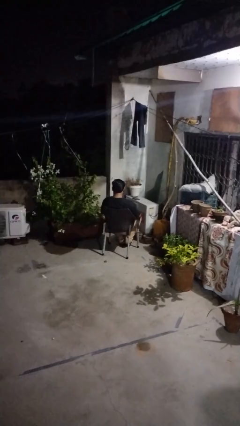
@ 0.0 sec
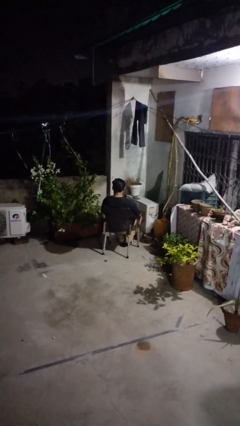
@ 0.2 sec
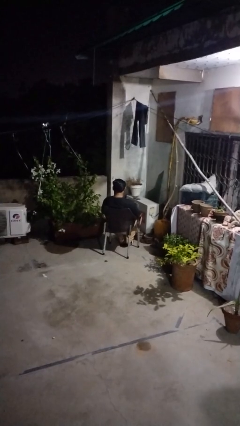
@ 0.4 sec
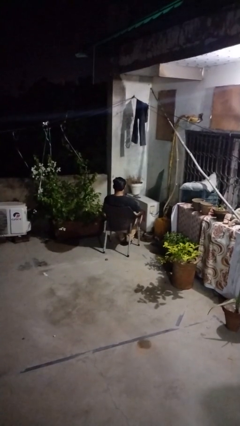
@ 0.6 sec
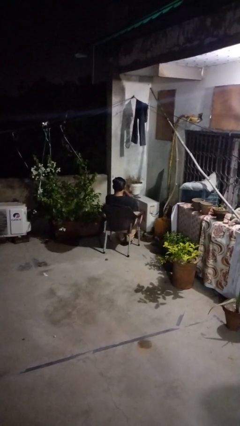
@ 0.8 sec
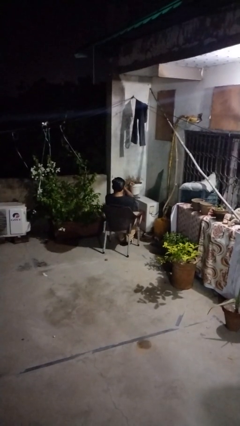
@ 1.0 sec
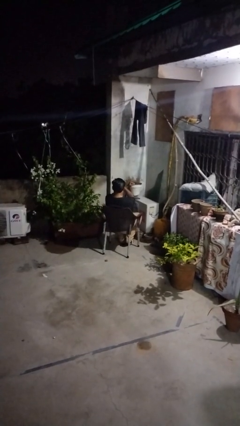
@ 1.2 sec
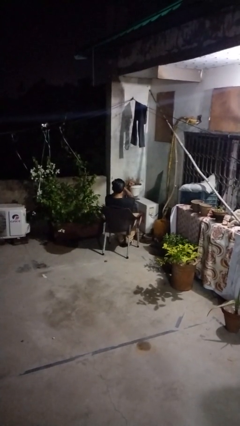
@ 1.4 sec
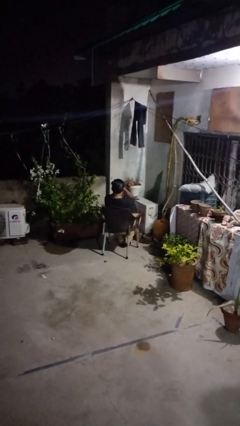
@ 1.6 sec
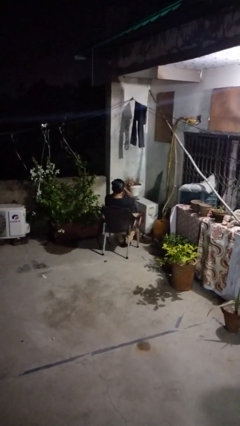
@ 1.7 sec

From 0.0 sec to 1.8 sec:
person gestures arms x

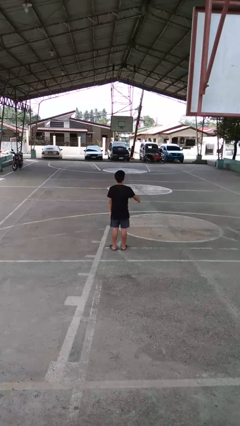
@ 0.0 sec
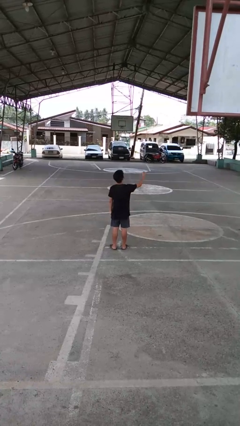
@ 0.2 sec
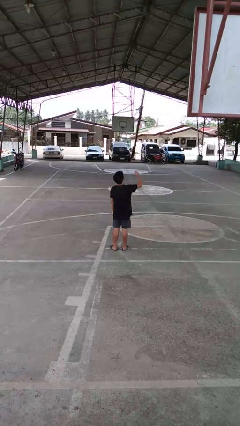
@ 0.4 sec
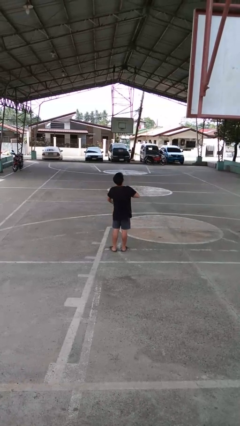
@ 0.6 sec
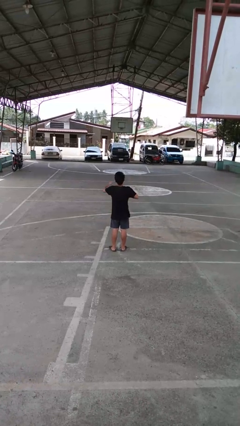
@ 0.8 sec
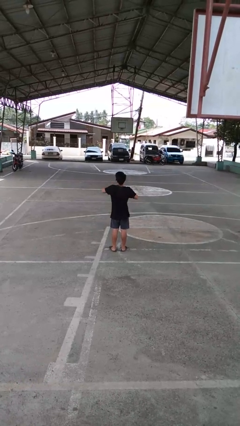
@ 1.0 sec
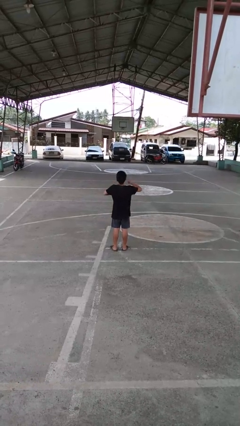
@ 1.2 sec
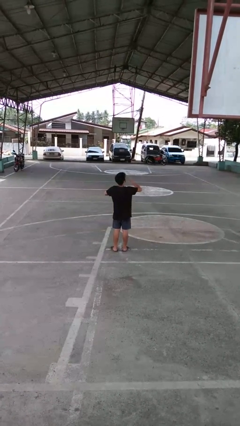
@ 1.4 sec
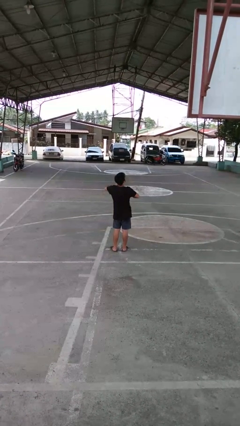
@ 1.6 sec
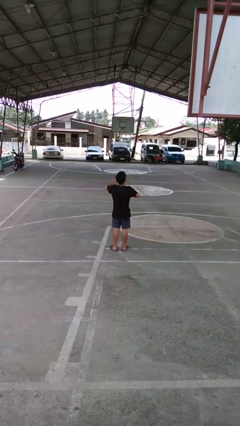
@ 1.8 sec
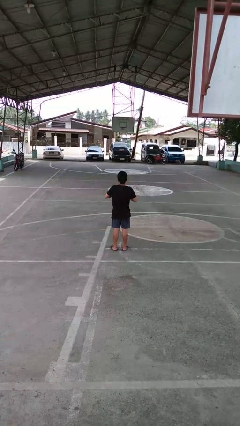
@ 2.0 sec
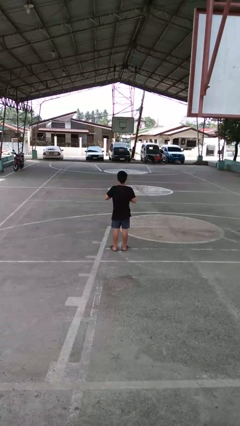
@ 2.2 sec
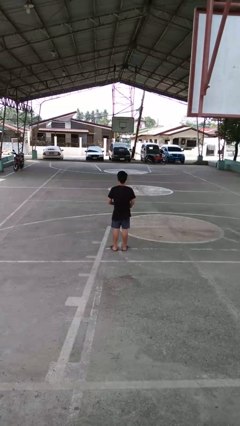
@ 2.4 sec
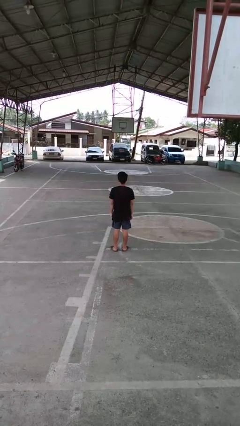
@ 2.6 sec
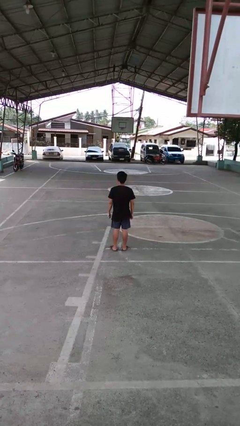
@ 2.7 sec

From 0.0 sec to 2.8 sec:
person drums on chest

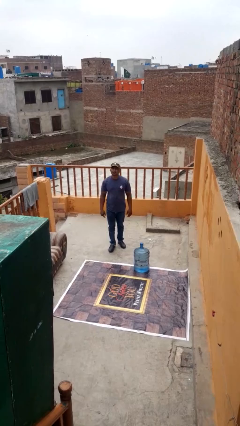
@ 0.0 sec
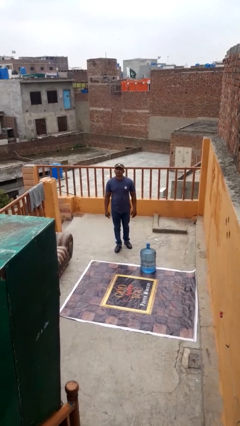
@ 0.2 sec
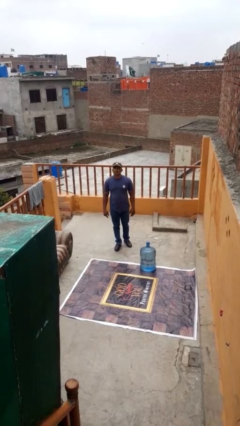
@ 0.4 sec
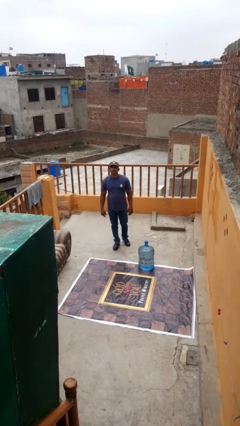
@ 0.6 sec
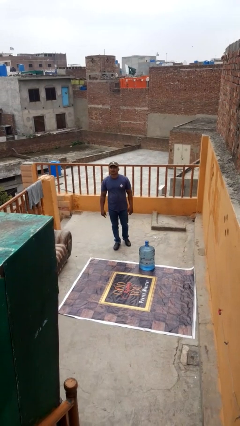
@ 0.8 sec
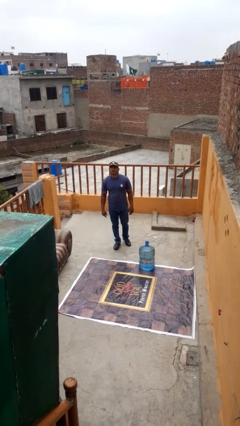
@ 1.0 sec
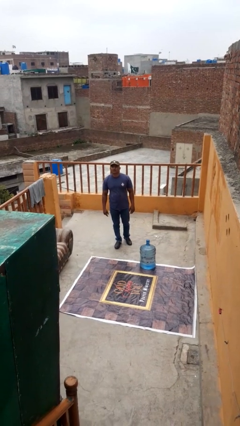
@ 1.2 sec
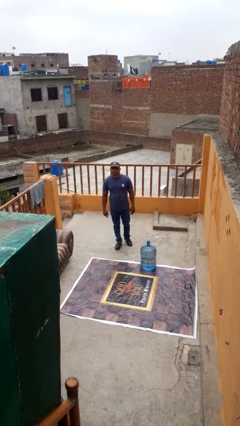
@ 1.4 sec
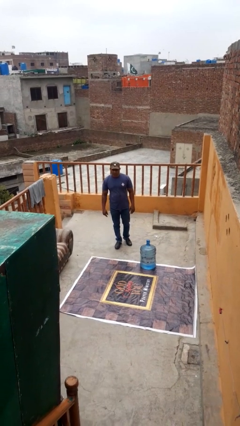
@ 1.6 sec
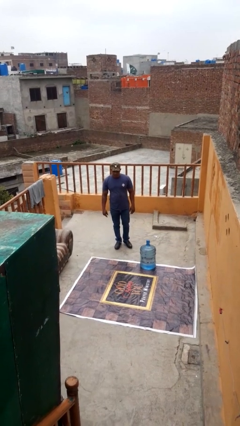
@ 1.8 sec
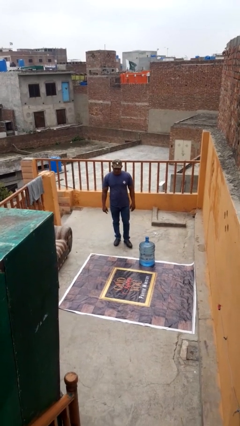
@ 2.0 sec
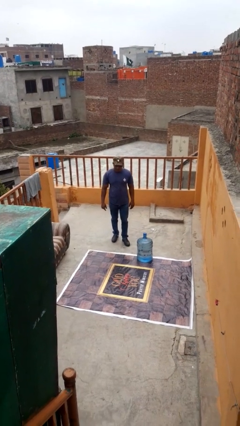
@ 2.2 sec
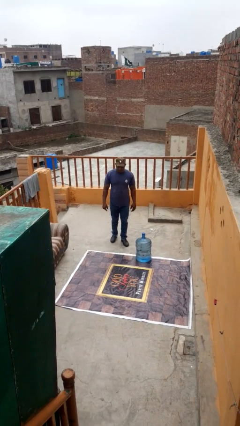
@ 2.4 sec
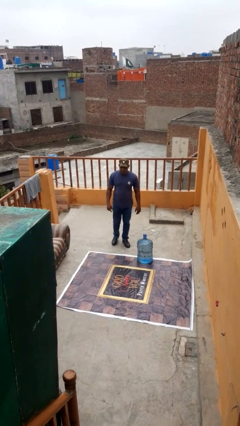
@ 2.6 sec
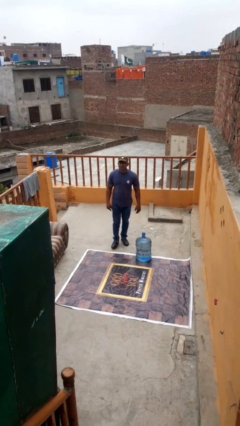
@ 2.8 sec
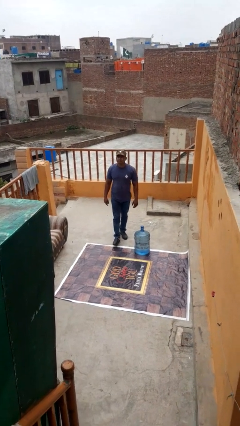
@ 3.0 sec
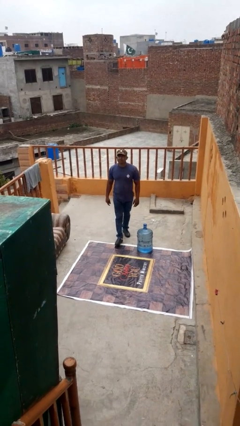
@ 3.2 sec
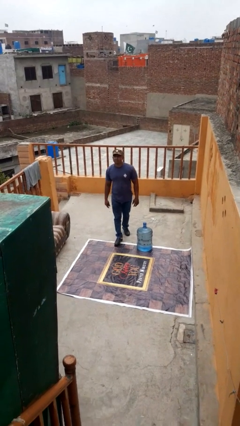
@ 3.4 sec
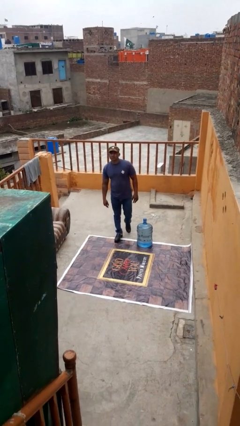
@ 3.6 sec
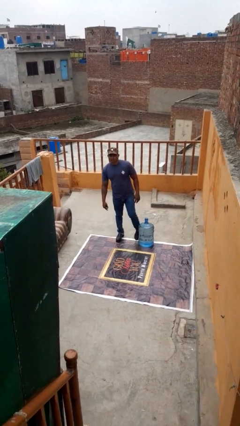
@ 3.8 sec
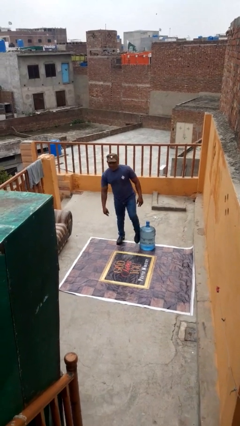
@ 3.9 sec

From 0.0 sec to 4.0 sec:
person trips on object on floor

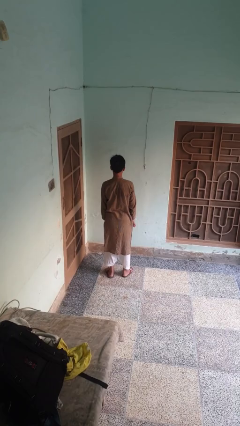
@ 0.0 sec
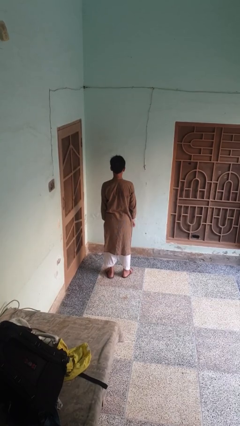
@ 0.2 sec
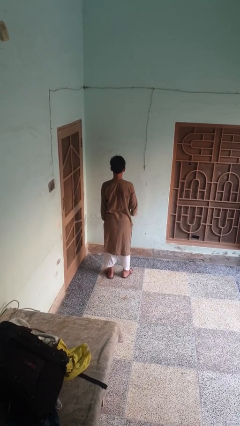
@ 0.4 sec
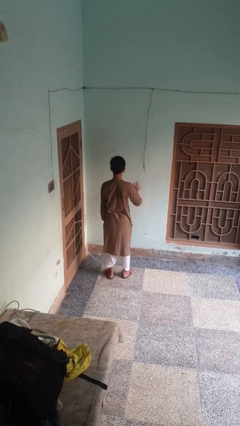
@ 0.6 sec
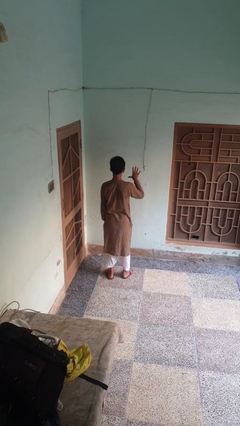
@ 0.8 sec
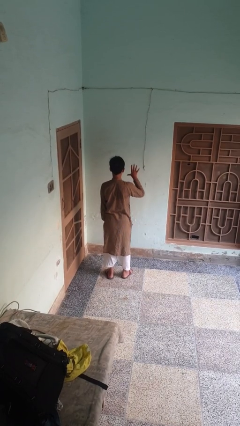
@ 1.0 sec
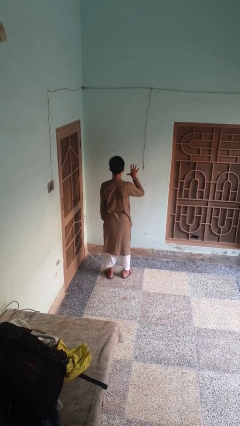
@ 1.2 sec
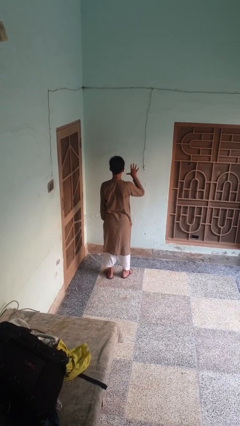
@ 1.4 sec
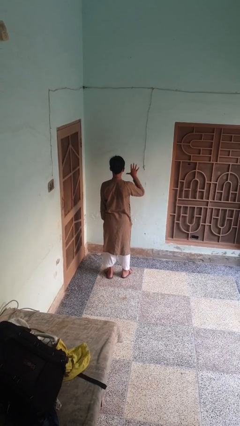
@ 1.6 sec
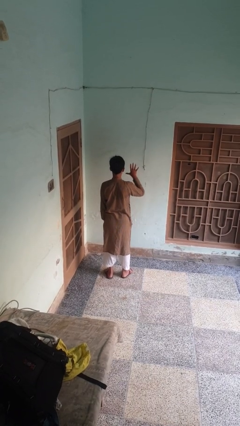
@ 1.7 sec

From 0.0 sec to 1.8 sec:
person gestures number five

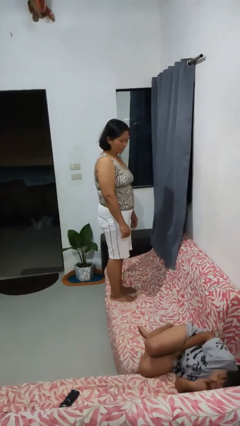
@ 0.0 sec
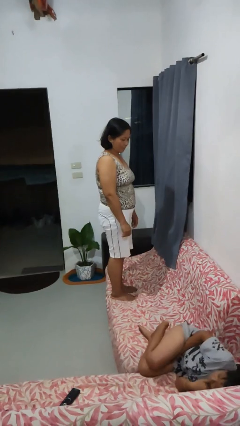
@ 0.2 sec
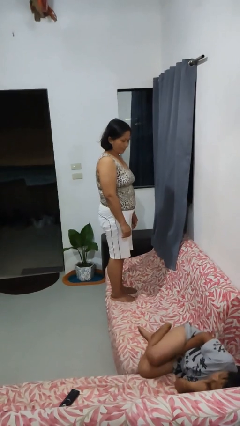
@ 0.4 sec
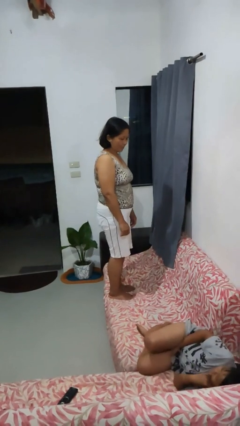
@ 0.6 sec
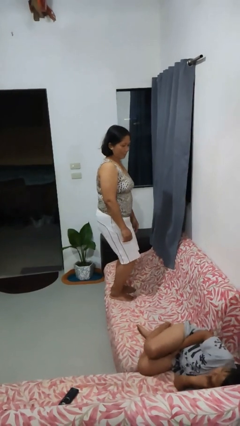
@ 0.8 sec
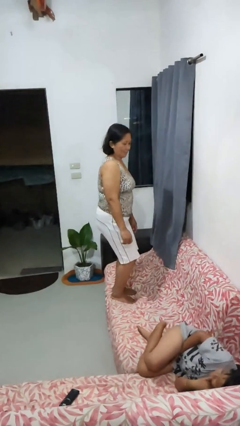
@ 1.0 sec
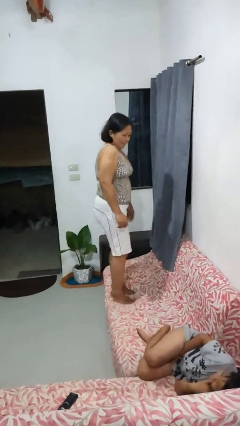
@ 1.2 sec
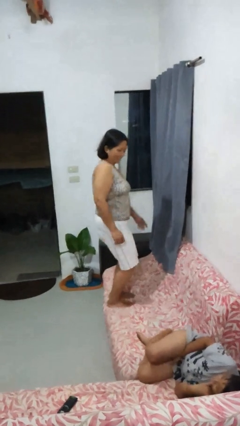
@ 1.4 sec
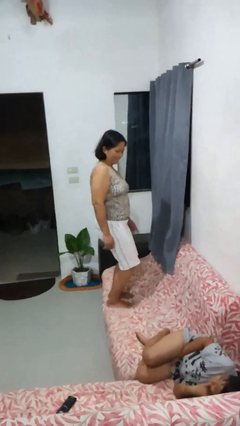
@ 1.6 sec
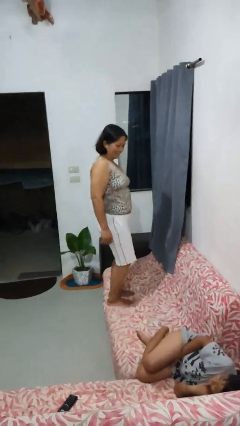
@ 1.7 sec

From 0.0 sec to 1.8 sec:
person jumps on couch

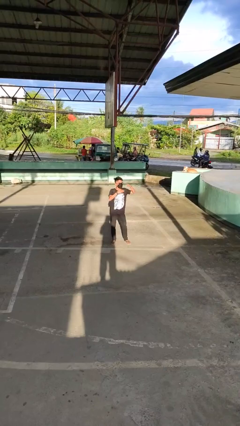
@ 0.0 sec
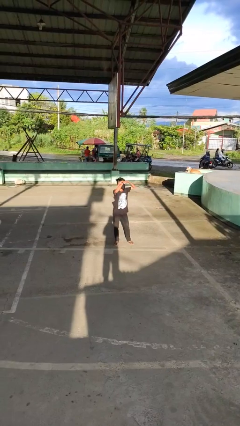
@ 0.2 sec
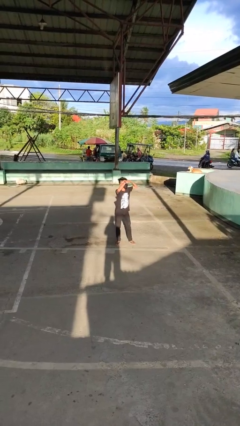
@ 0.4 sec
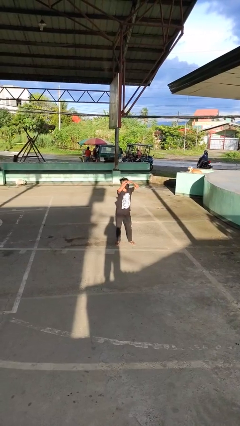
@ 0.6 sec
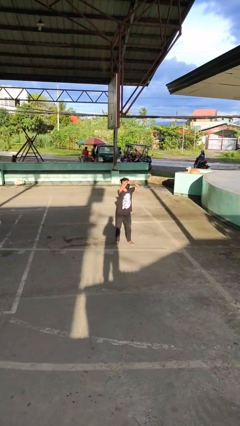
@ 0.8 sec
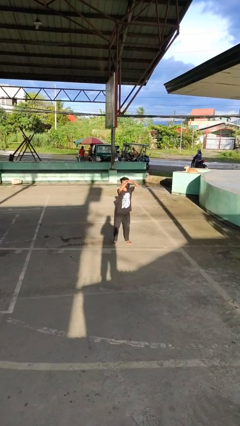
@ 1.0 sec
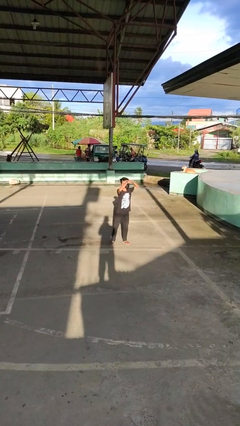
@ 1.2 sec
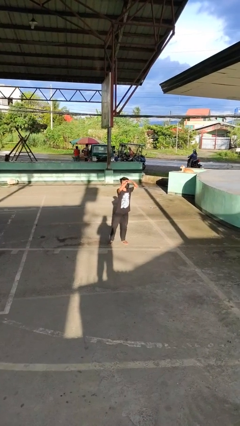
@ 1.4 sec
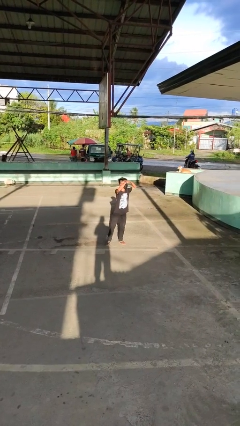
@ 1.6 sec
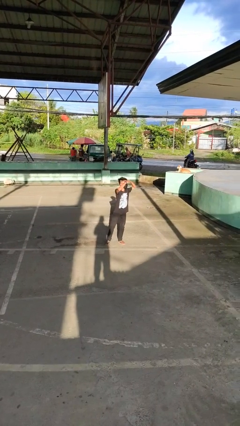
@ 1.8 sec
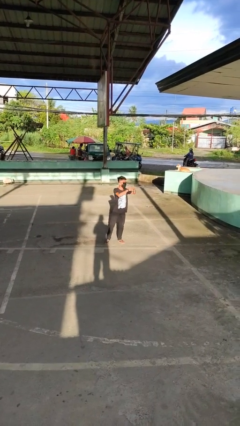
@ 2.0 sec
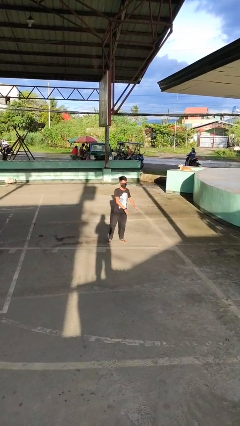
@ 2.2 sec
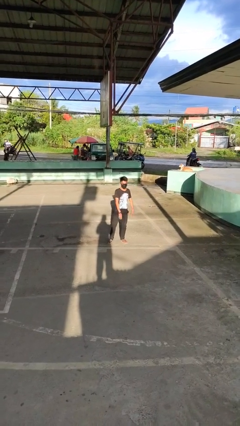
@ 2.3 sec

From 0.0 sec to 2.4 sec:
person shades eyes

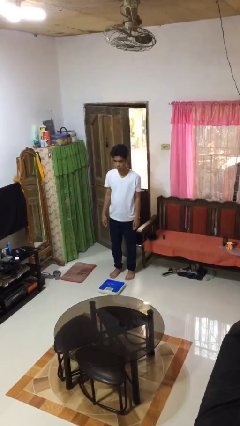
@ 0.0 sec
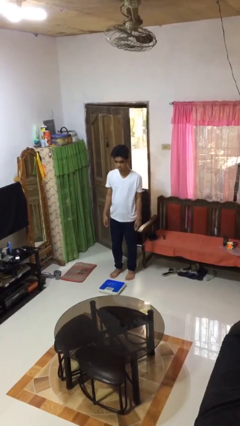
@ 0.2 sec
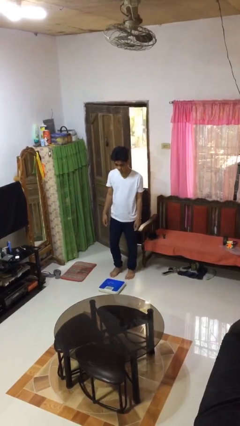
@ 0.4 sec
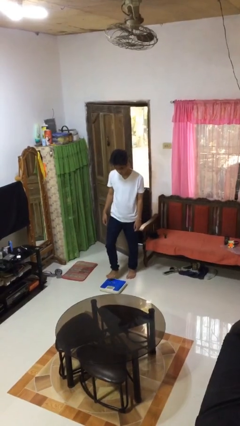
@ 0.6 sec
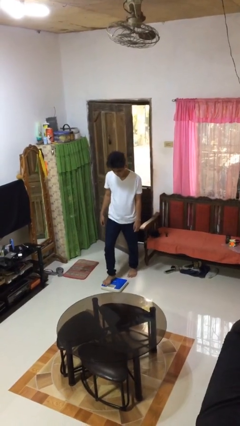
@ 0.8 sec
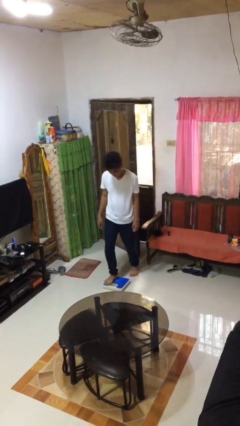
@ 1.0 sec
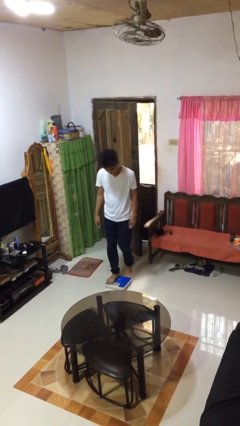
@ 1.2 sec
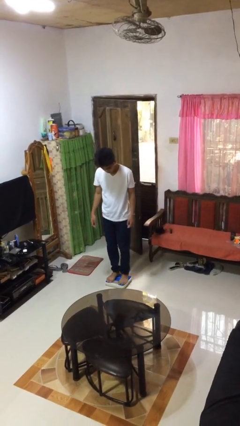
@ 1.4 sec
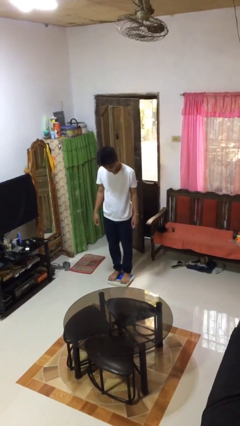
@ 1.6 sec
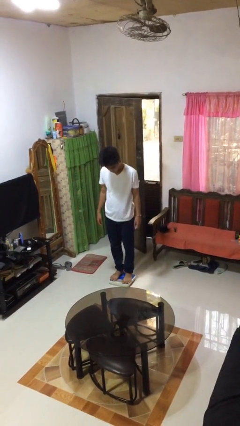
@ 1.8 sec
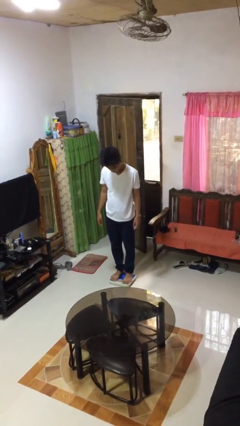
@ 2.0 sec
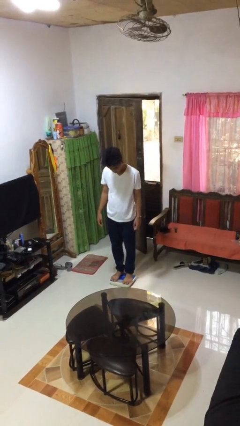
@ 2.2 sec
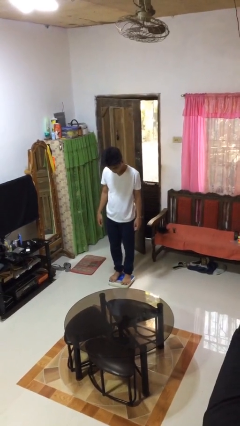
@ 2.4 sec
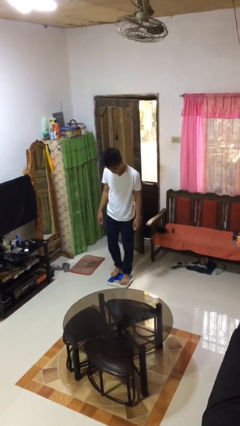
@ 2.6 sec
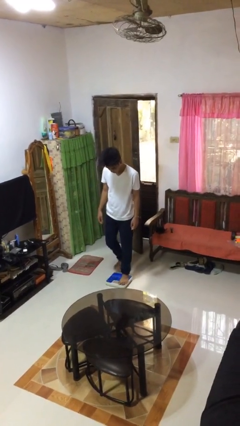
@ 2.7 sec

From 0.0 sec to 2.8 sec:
person uses bodyweight scale
